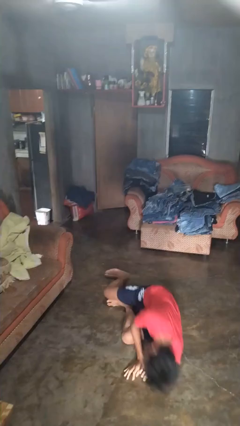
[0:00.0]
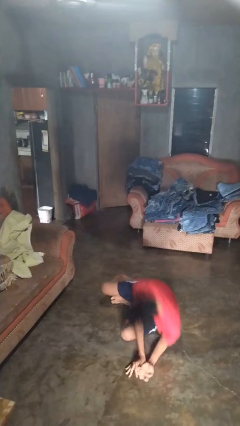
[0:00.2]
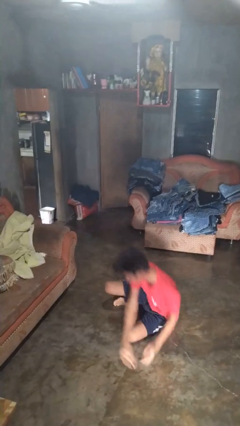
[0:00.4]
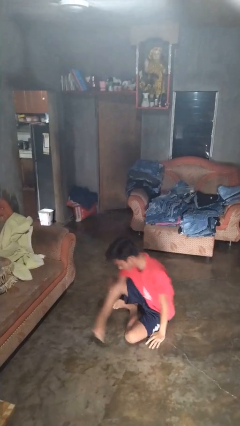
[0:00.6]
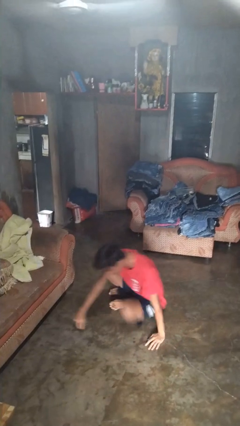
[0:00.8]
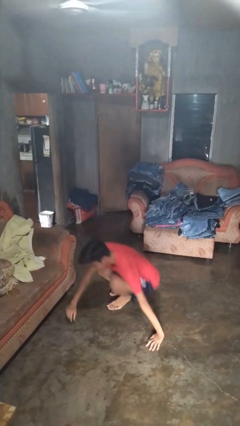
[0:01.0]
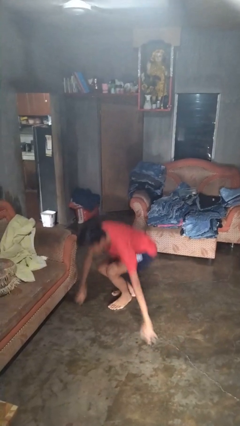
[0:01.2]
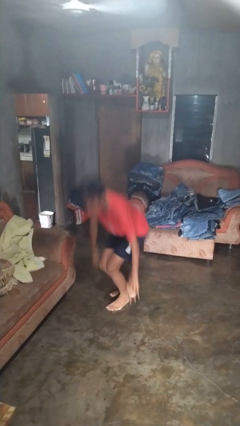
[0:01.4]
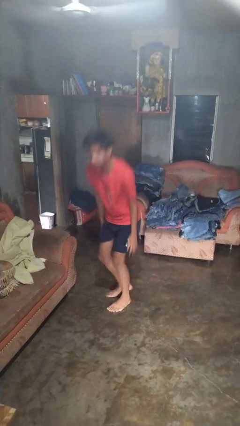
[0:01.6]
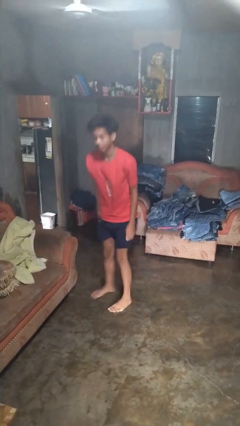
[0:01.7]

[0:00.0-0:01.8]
person stands up from floor

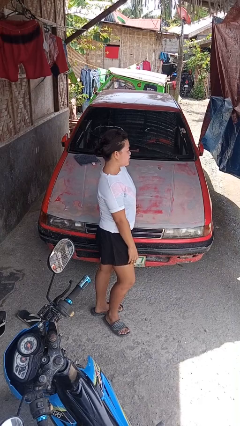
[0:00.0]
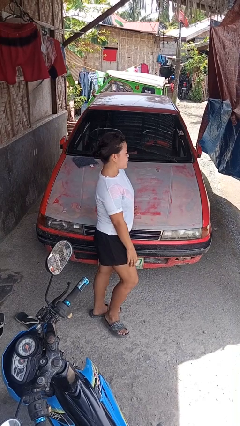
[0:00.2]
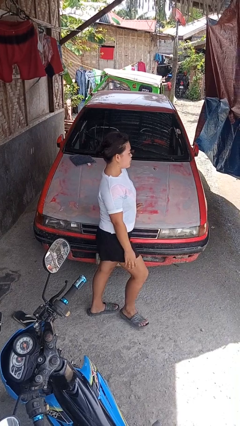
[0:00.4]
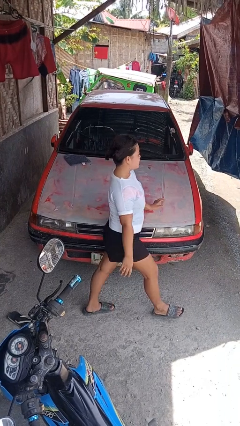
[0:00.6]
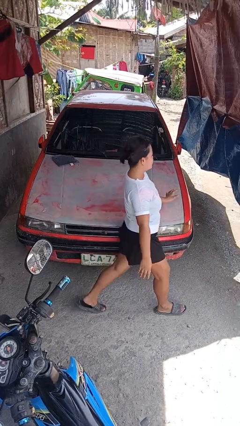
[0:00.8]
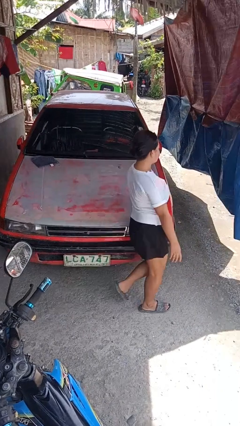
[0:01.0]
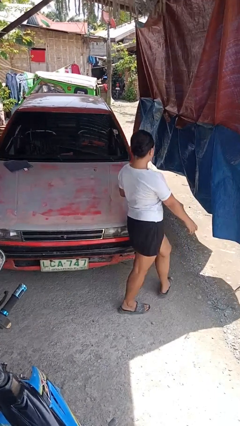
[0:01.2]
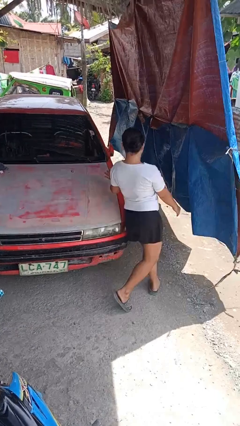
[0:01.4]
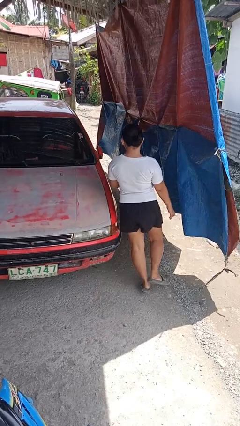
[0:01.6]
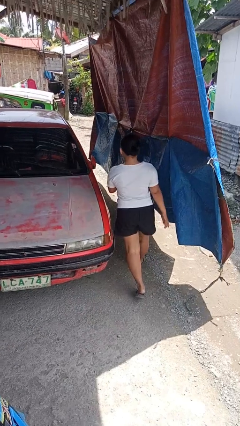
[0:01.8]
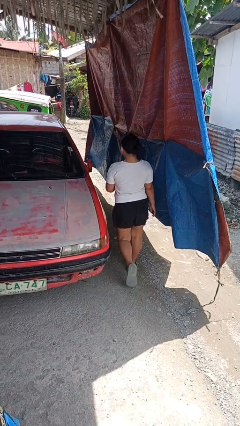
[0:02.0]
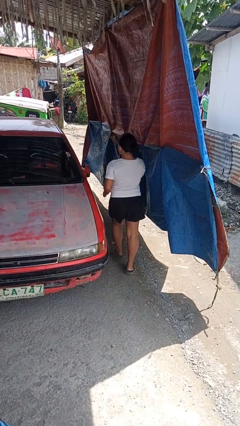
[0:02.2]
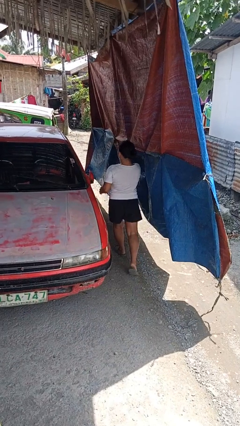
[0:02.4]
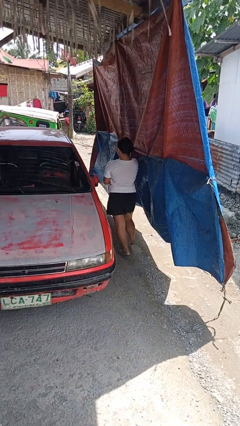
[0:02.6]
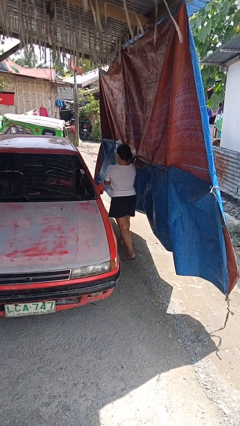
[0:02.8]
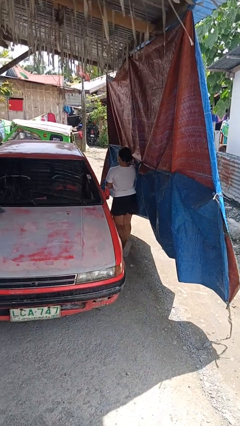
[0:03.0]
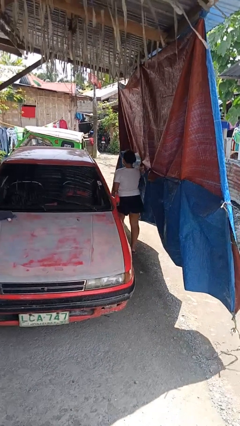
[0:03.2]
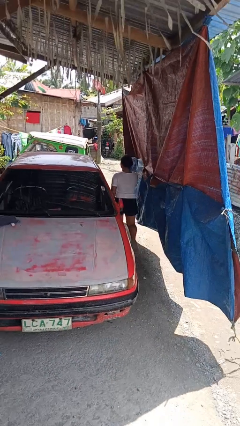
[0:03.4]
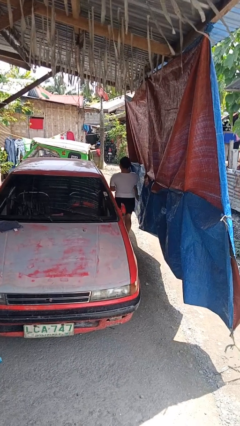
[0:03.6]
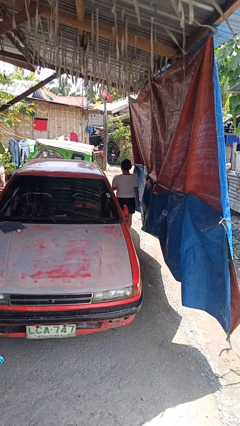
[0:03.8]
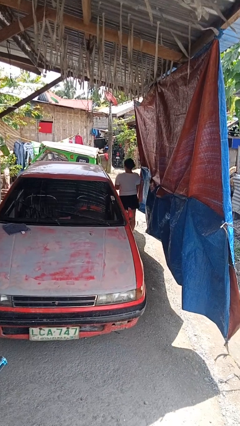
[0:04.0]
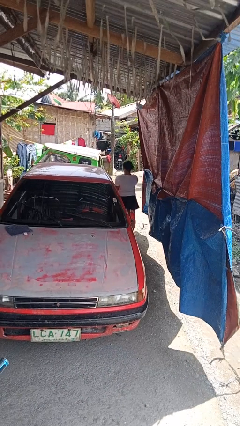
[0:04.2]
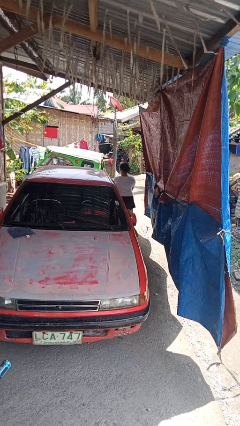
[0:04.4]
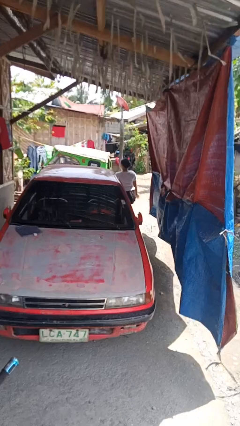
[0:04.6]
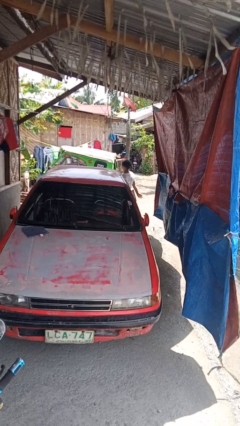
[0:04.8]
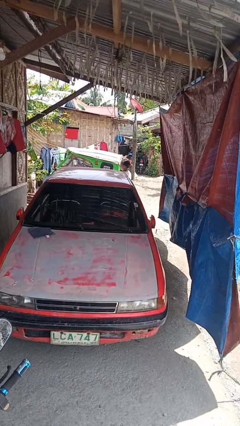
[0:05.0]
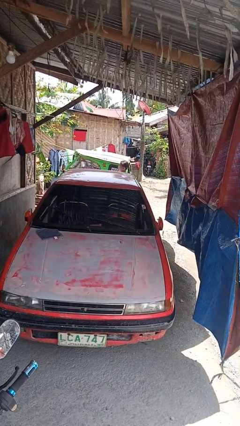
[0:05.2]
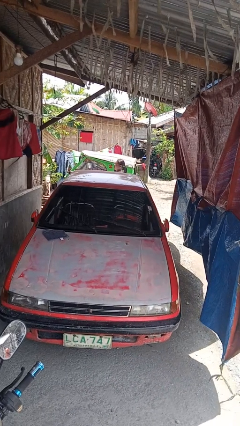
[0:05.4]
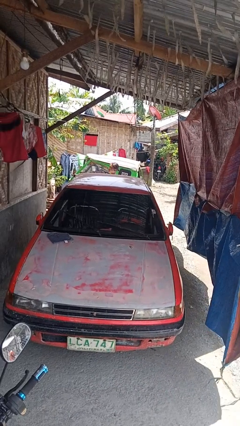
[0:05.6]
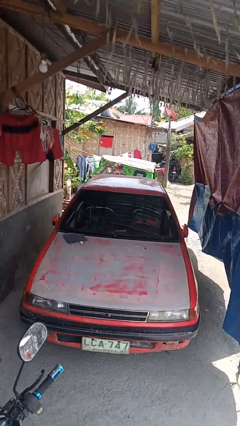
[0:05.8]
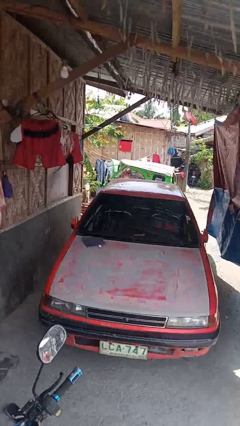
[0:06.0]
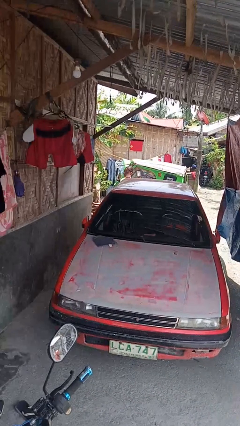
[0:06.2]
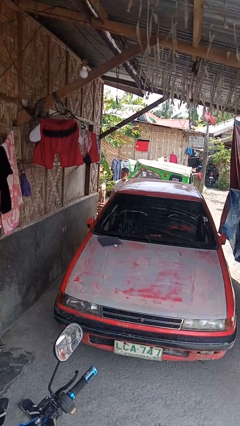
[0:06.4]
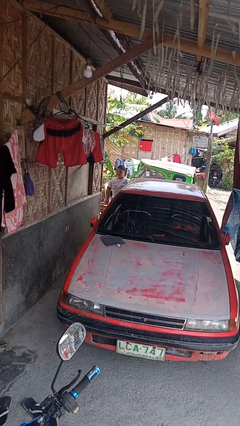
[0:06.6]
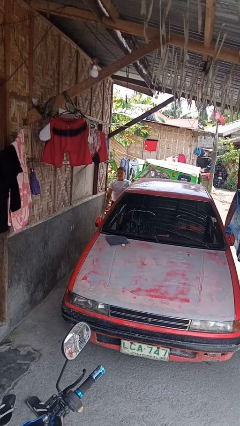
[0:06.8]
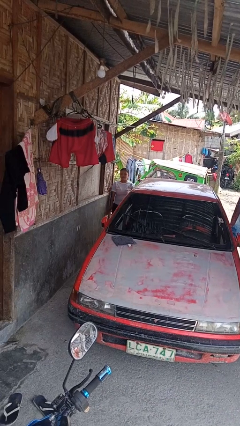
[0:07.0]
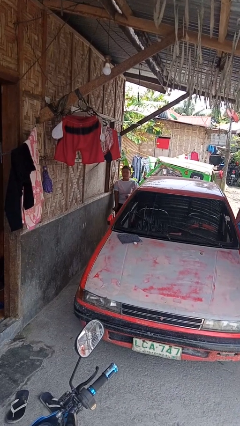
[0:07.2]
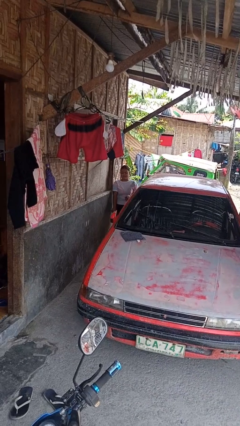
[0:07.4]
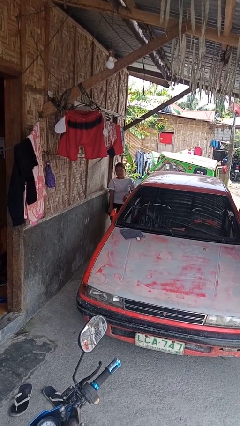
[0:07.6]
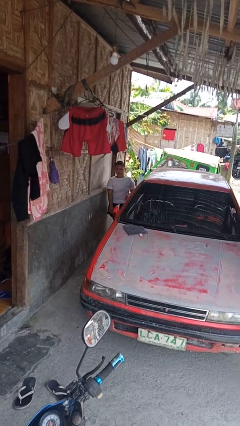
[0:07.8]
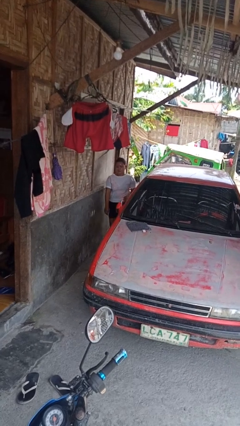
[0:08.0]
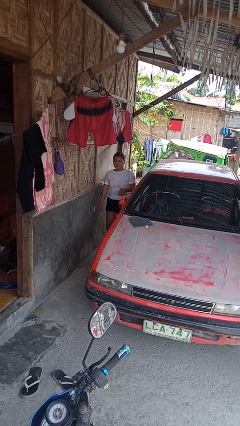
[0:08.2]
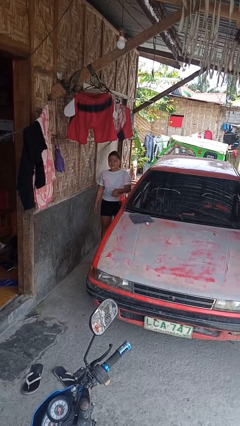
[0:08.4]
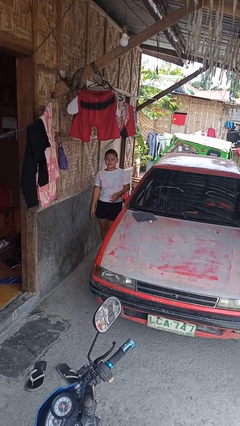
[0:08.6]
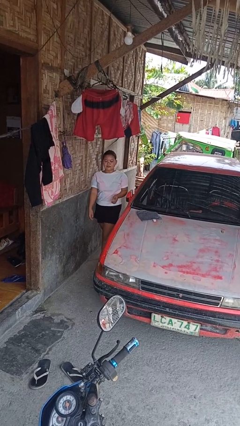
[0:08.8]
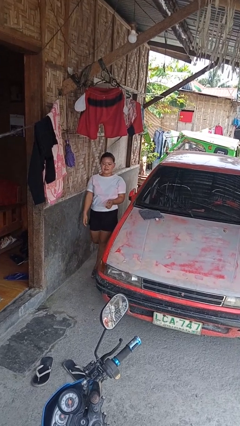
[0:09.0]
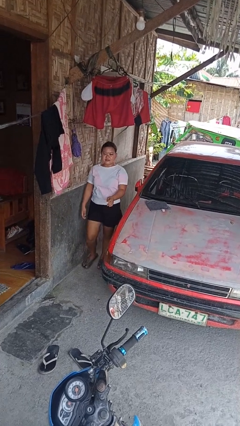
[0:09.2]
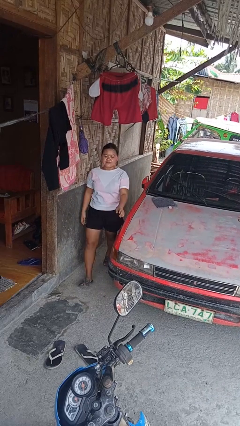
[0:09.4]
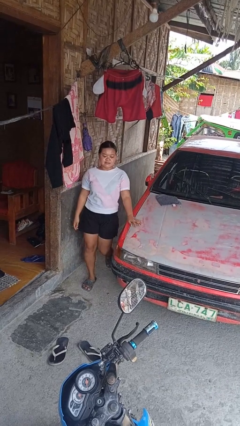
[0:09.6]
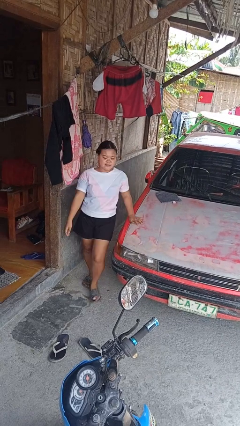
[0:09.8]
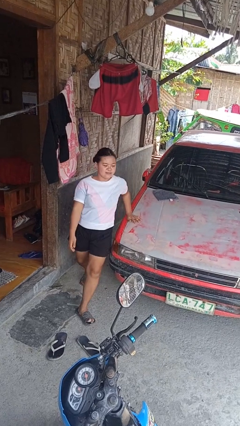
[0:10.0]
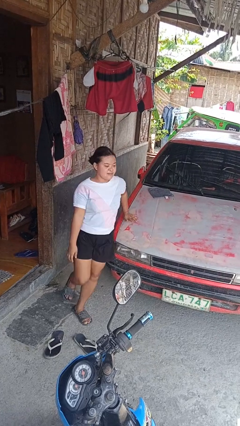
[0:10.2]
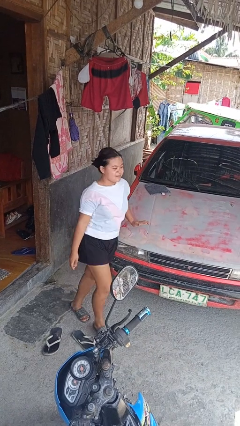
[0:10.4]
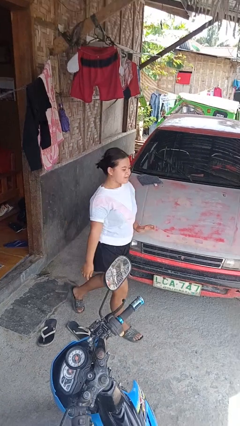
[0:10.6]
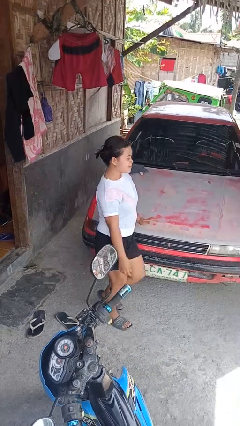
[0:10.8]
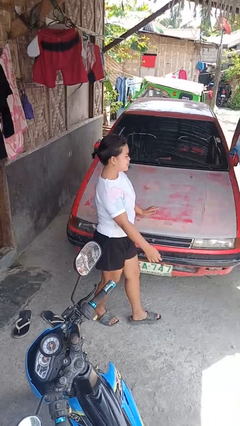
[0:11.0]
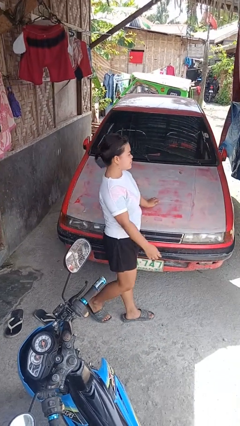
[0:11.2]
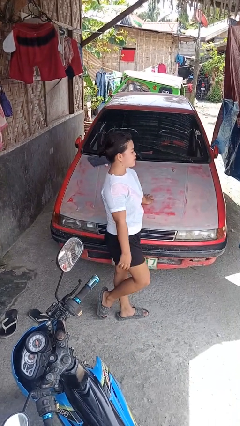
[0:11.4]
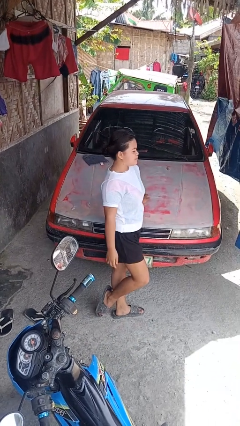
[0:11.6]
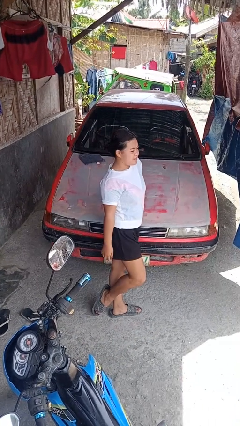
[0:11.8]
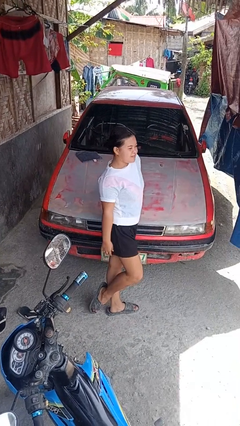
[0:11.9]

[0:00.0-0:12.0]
person walks around car

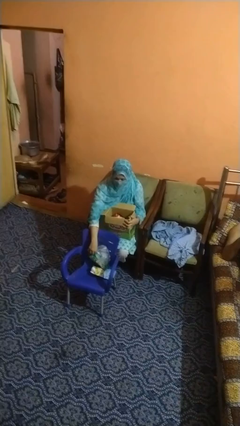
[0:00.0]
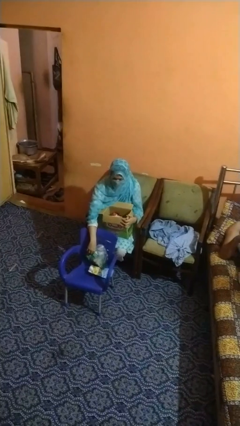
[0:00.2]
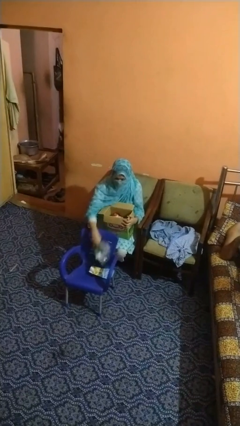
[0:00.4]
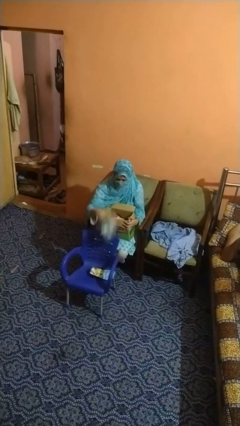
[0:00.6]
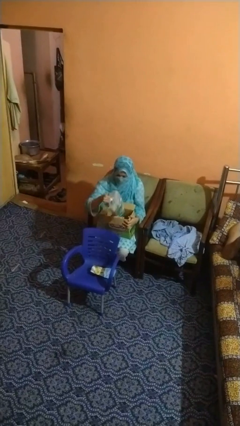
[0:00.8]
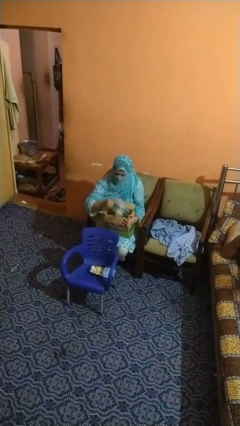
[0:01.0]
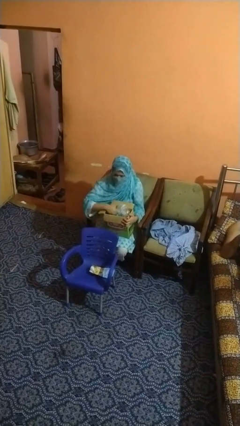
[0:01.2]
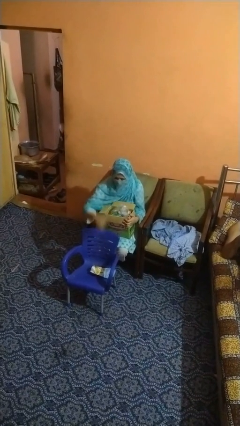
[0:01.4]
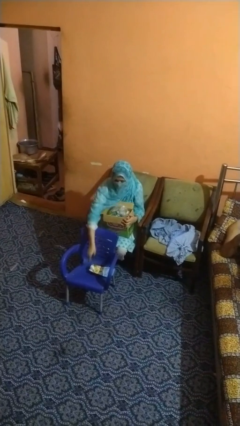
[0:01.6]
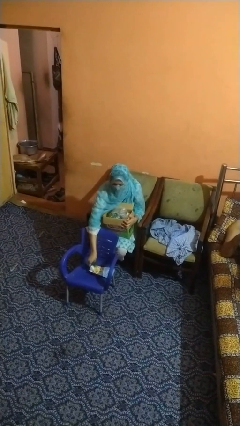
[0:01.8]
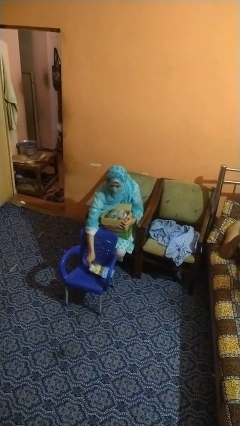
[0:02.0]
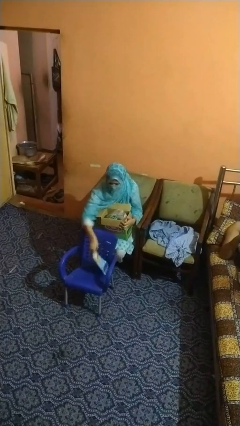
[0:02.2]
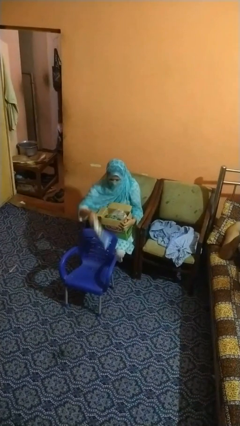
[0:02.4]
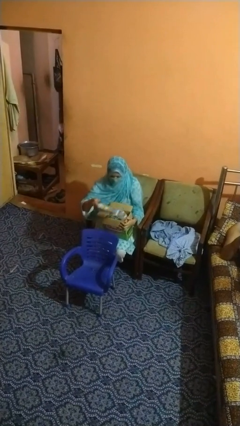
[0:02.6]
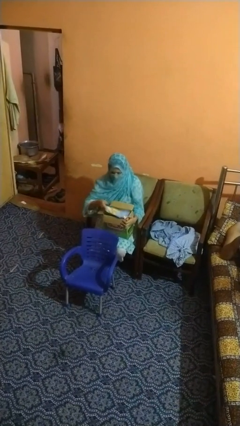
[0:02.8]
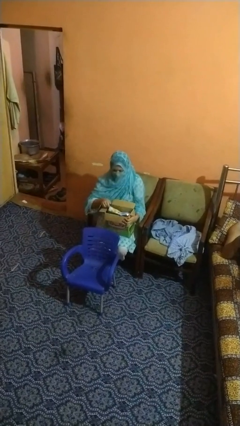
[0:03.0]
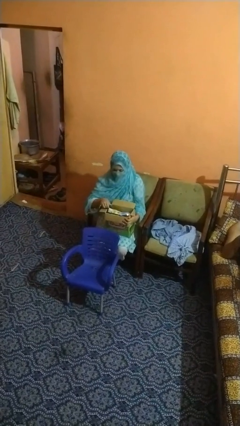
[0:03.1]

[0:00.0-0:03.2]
person puts object into box

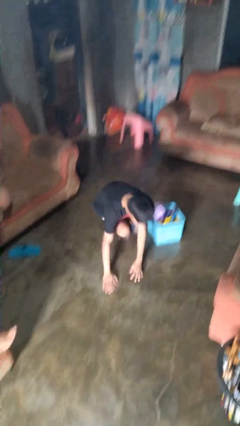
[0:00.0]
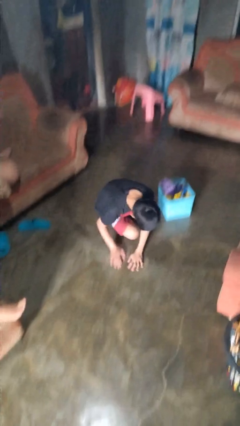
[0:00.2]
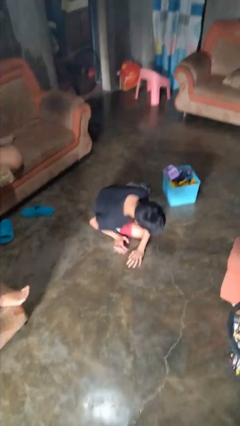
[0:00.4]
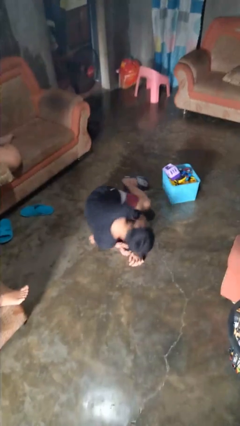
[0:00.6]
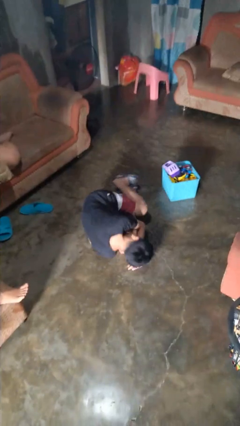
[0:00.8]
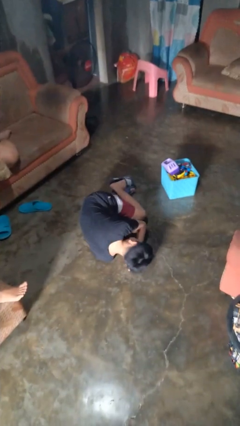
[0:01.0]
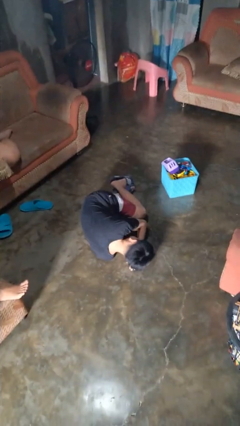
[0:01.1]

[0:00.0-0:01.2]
person lies down on floor
